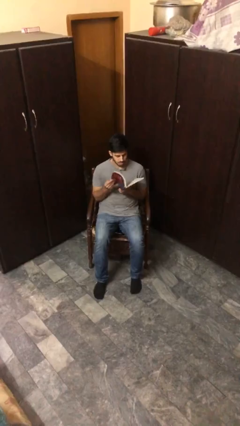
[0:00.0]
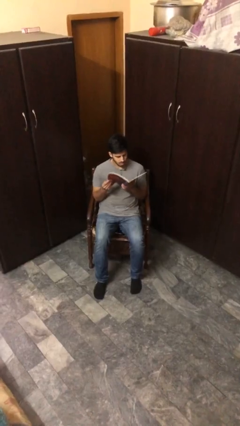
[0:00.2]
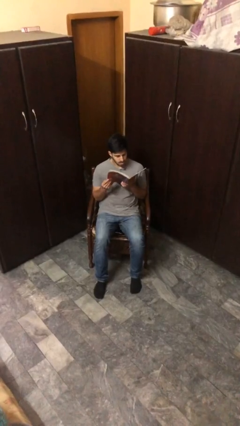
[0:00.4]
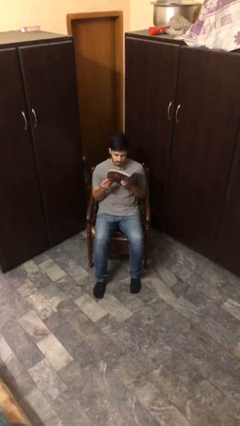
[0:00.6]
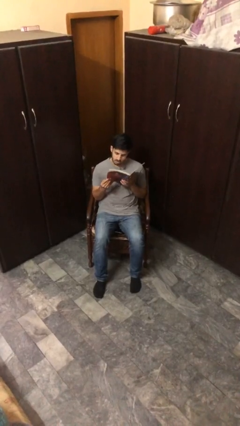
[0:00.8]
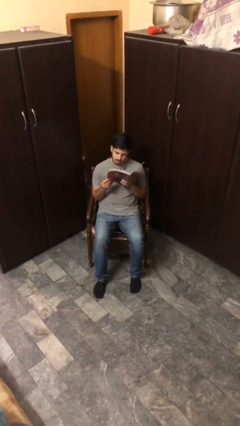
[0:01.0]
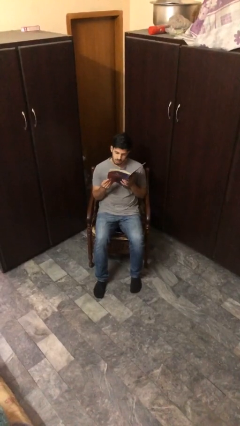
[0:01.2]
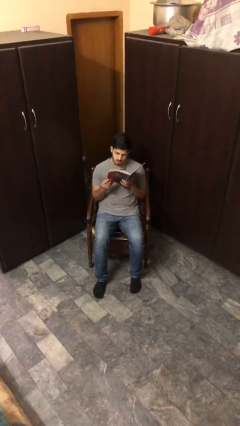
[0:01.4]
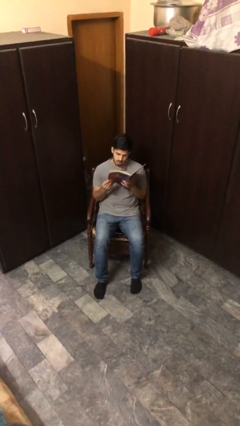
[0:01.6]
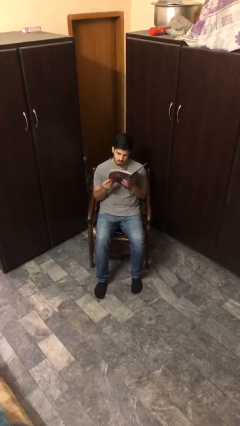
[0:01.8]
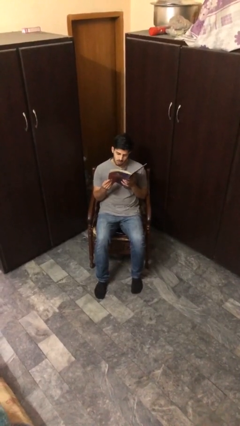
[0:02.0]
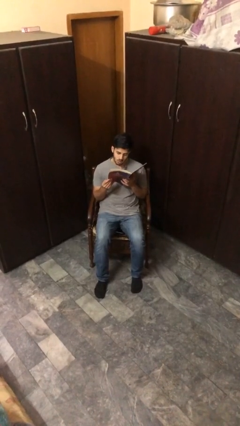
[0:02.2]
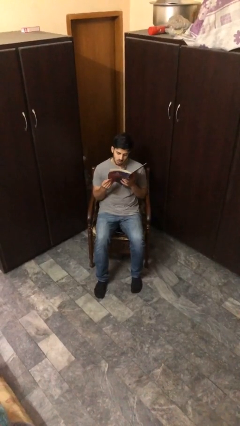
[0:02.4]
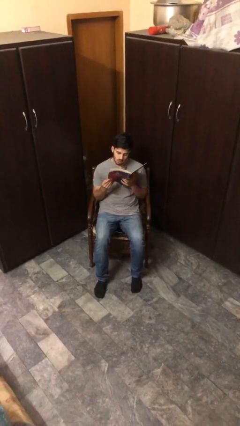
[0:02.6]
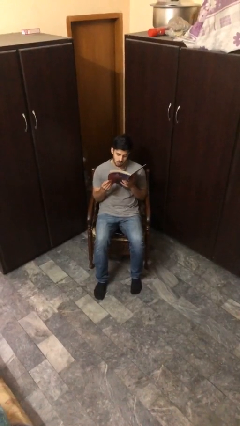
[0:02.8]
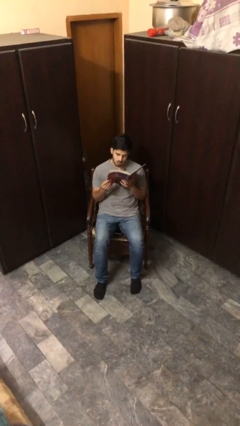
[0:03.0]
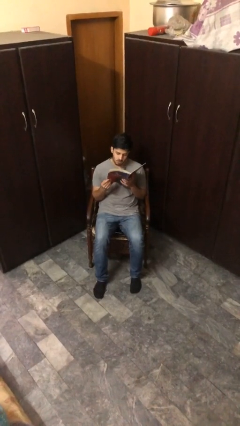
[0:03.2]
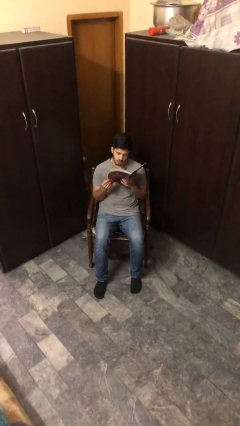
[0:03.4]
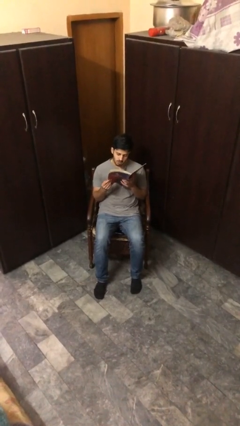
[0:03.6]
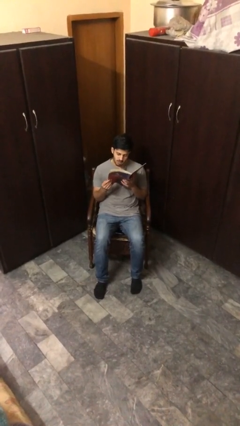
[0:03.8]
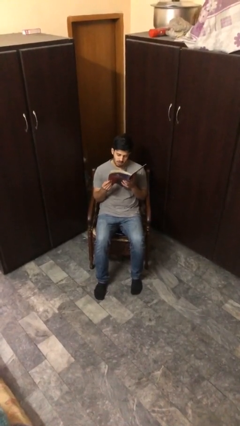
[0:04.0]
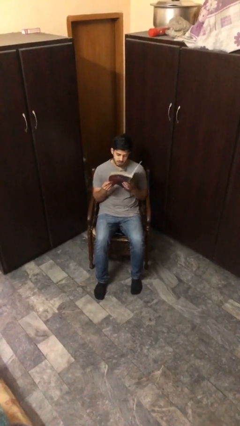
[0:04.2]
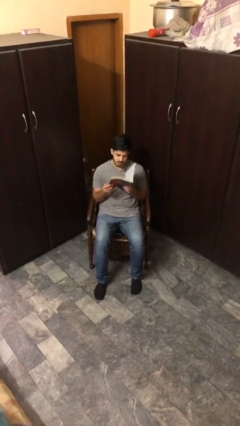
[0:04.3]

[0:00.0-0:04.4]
person reads document

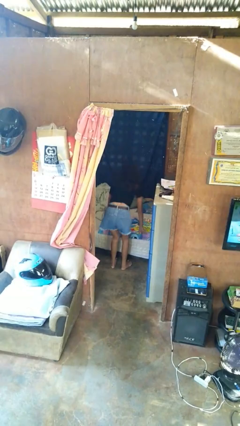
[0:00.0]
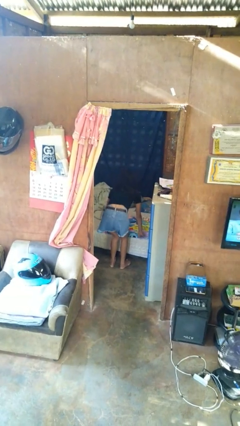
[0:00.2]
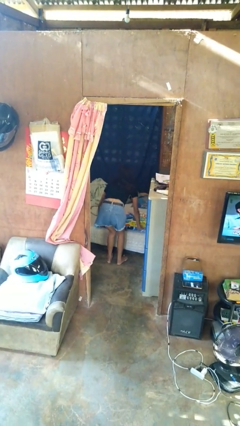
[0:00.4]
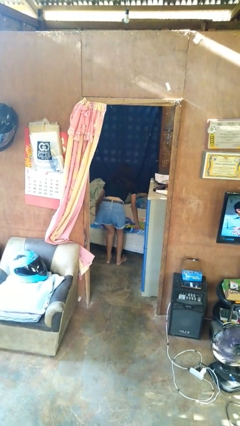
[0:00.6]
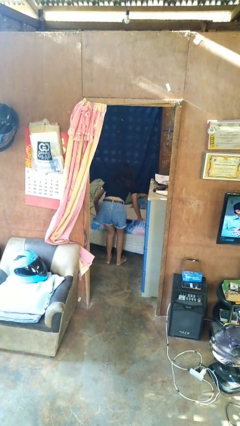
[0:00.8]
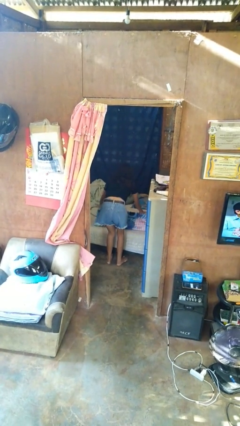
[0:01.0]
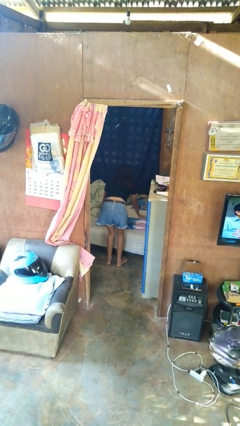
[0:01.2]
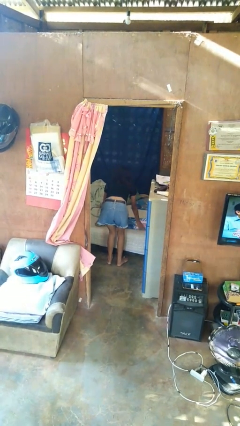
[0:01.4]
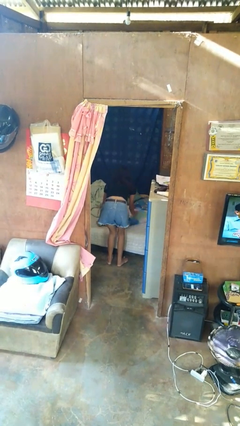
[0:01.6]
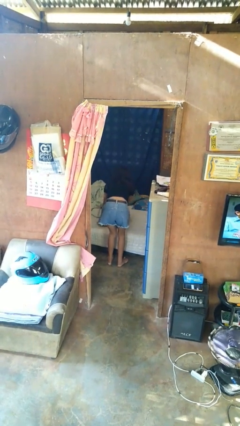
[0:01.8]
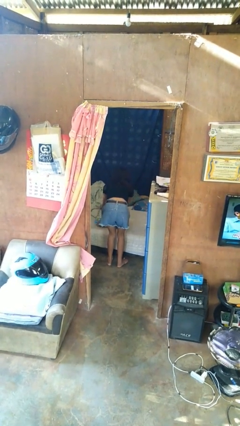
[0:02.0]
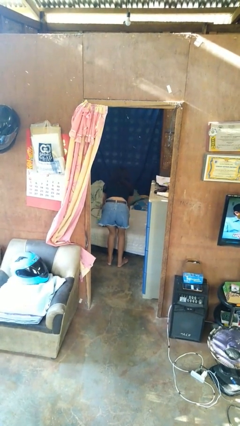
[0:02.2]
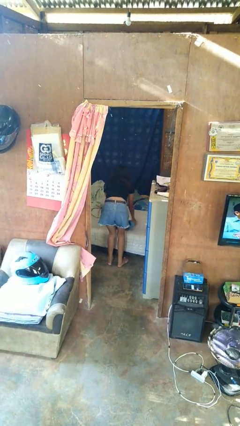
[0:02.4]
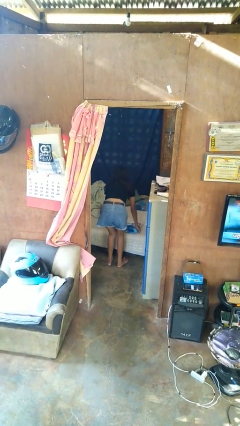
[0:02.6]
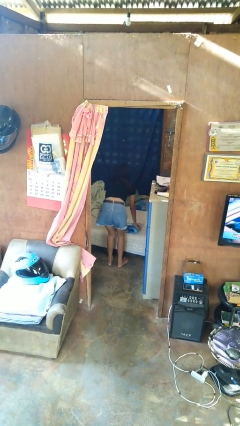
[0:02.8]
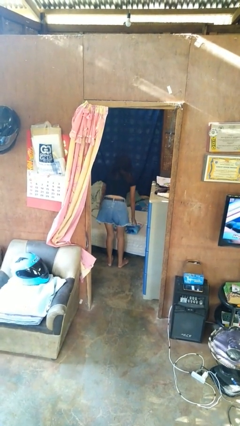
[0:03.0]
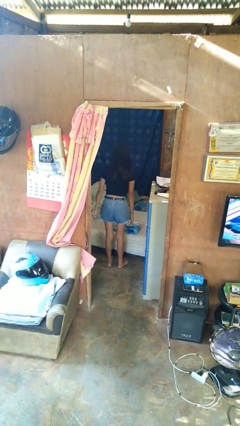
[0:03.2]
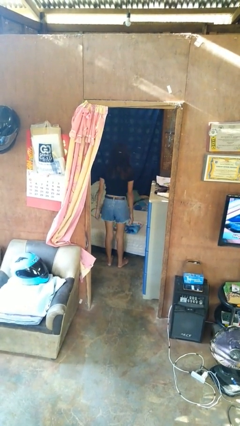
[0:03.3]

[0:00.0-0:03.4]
person folds blanket

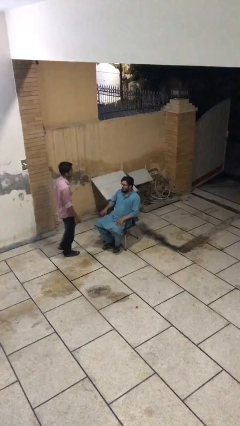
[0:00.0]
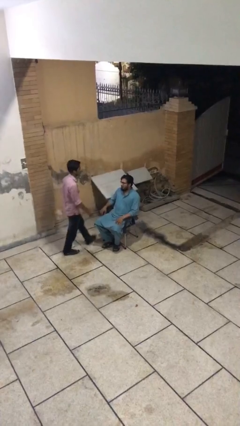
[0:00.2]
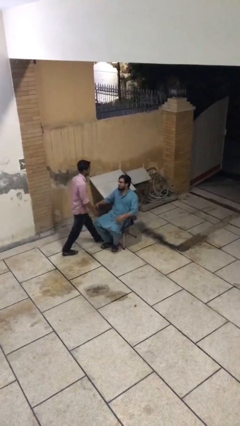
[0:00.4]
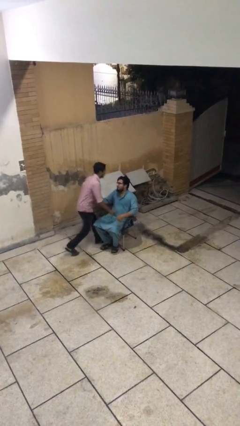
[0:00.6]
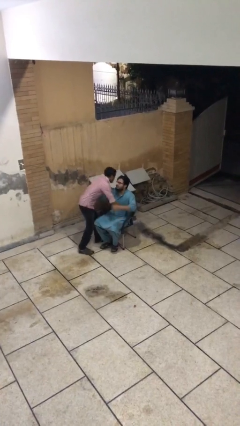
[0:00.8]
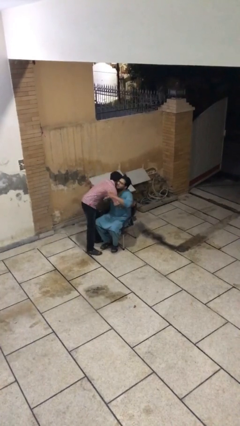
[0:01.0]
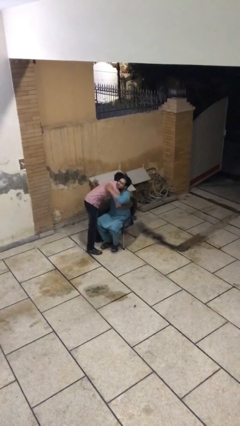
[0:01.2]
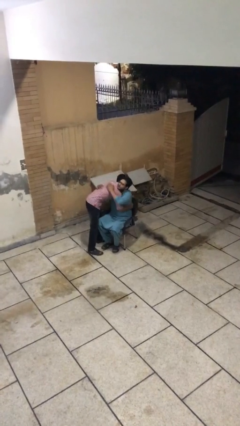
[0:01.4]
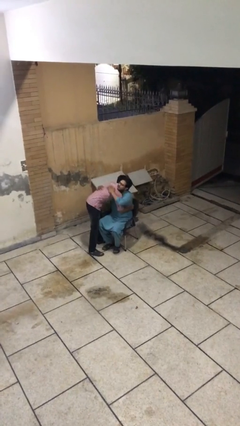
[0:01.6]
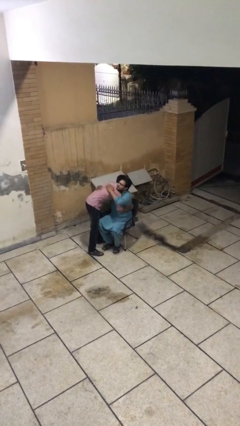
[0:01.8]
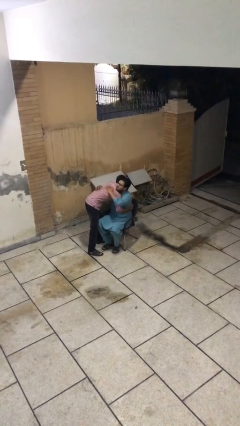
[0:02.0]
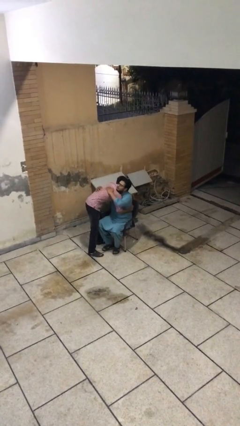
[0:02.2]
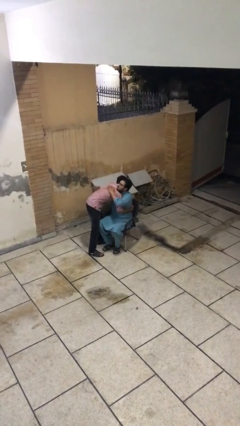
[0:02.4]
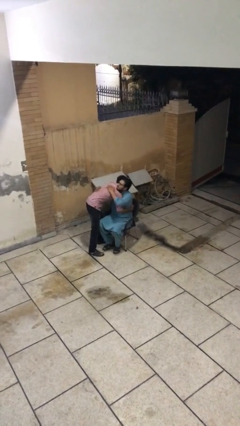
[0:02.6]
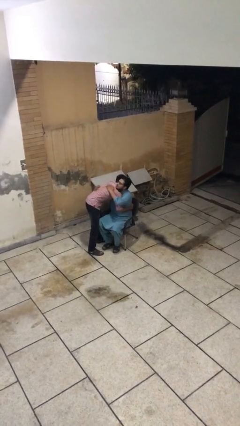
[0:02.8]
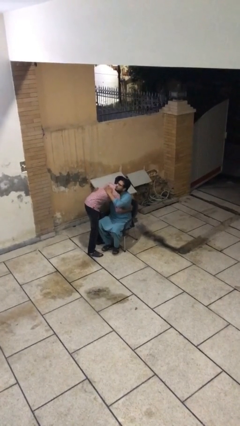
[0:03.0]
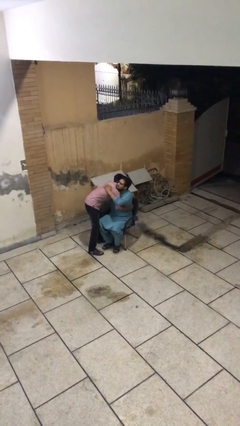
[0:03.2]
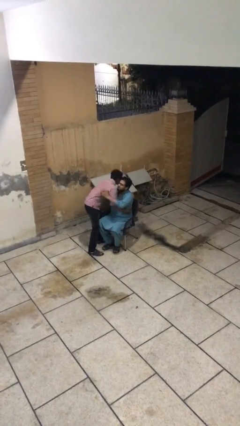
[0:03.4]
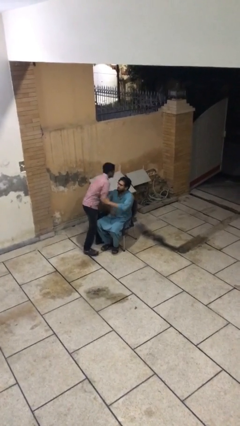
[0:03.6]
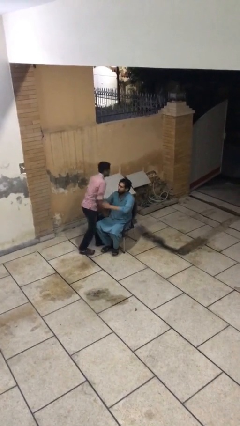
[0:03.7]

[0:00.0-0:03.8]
person embraces person

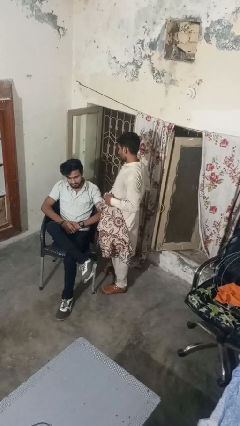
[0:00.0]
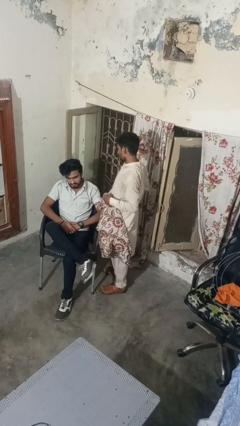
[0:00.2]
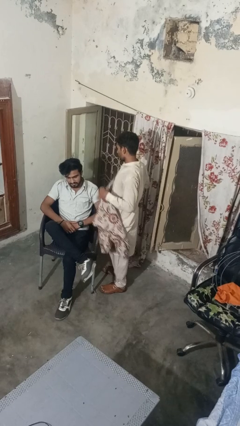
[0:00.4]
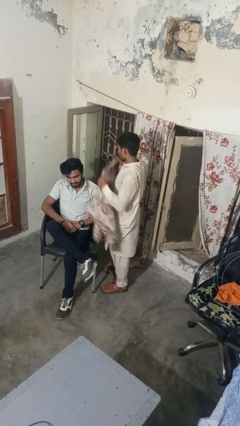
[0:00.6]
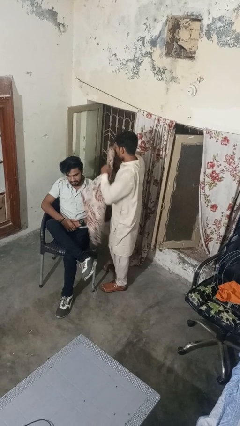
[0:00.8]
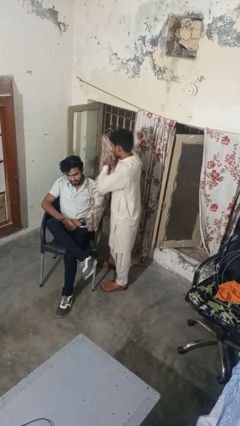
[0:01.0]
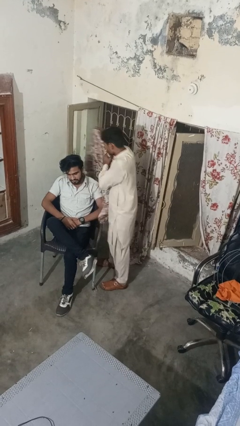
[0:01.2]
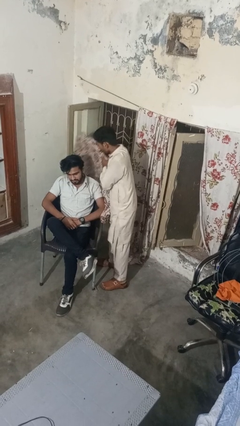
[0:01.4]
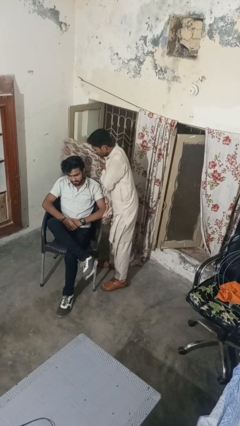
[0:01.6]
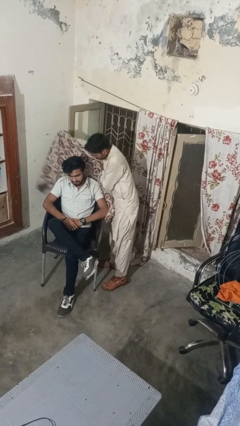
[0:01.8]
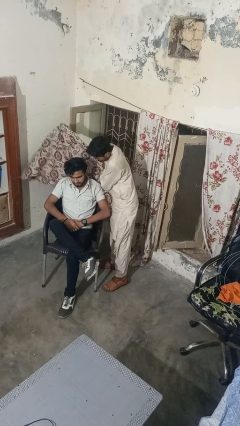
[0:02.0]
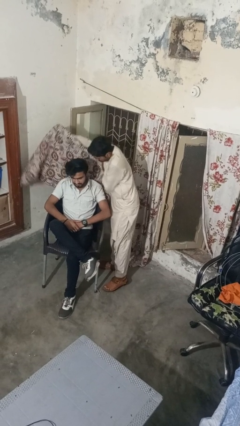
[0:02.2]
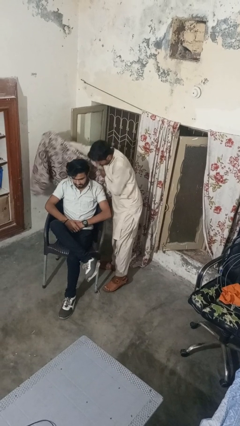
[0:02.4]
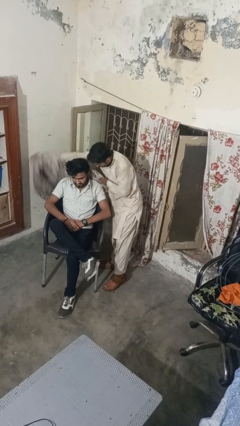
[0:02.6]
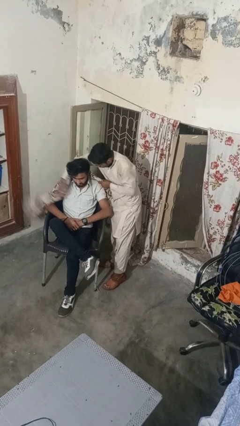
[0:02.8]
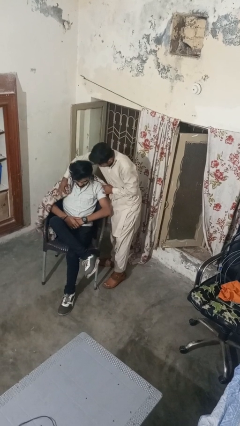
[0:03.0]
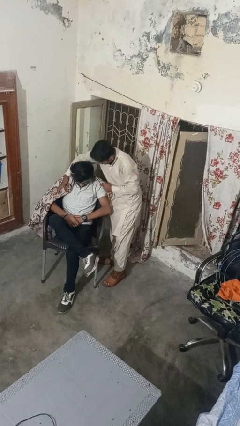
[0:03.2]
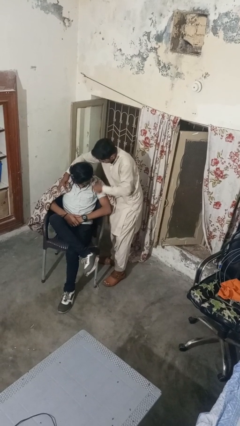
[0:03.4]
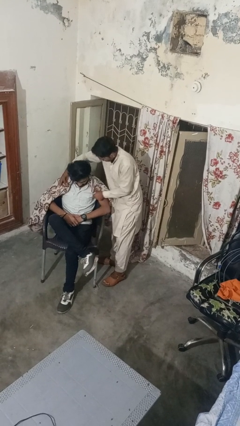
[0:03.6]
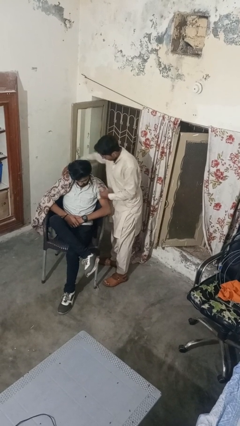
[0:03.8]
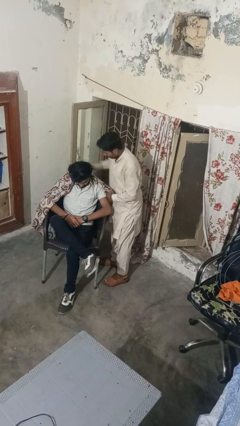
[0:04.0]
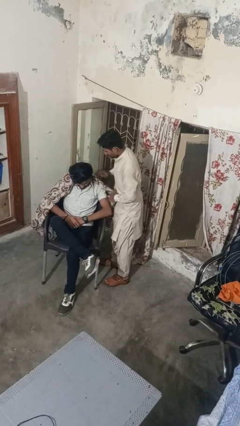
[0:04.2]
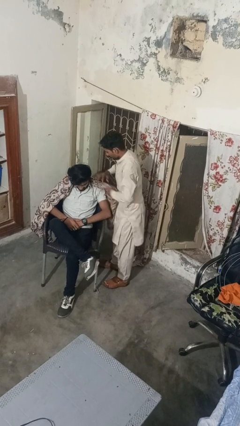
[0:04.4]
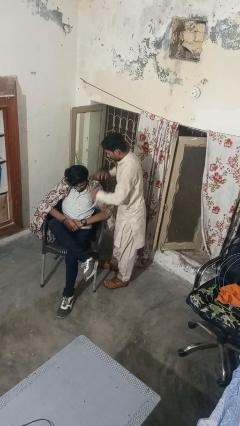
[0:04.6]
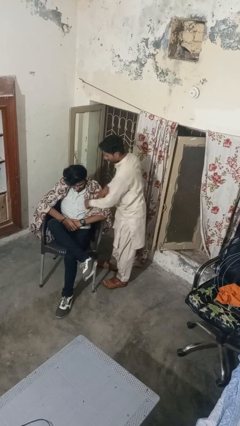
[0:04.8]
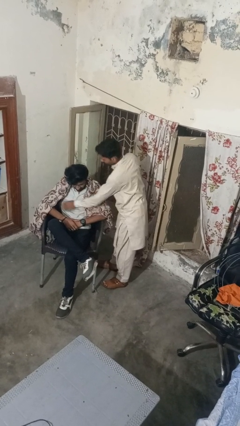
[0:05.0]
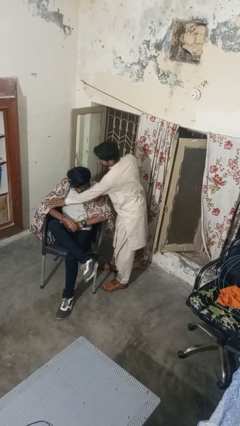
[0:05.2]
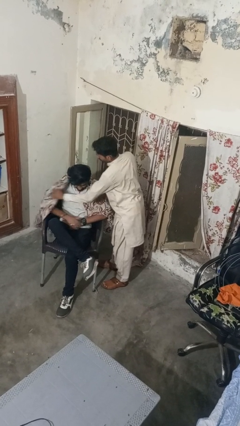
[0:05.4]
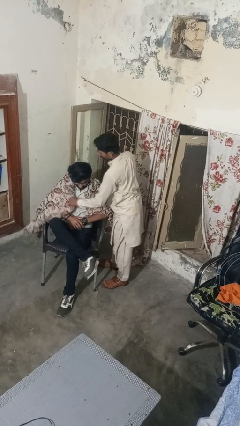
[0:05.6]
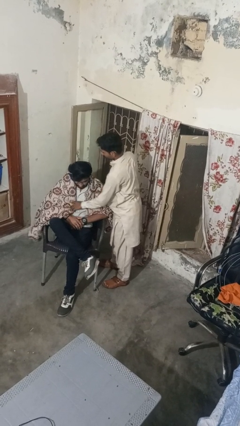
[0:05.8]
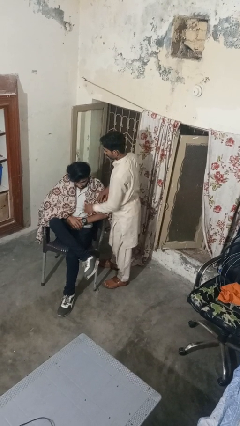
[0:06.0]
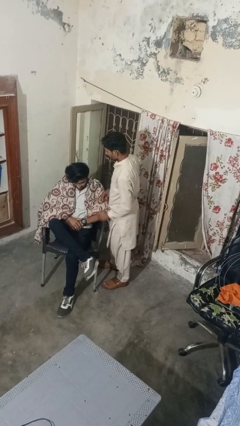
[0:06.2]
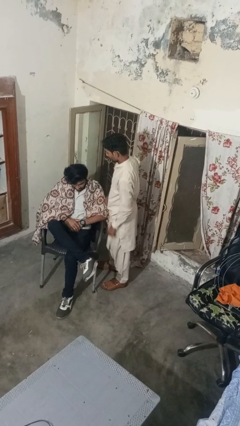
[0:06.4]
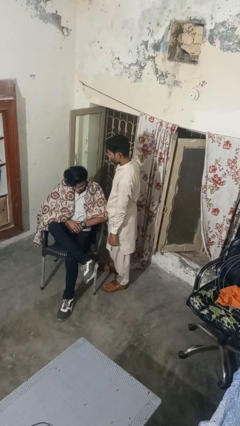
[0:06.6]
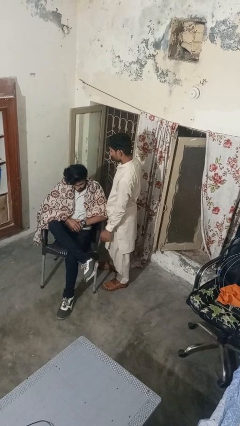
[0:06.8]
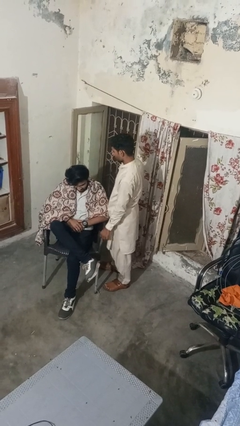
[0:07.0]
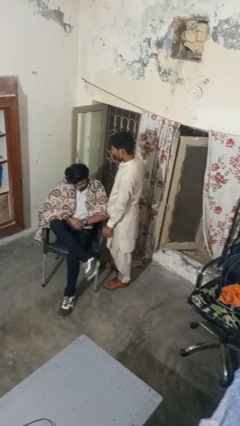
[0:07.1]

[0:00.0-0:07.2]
person covers friend with blanket
